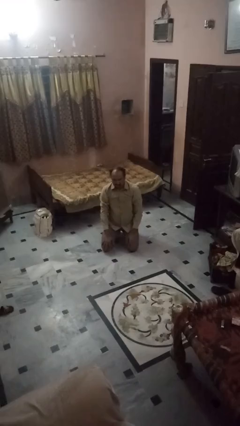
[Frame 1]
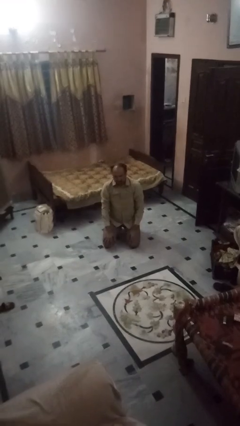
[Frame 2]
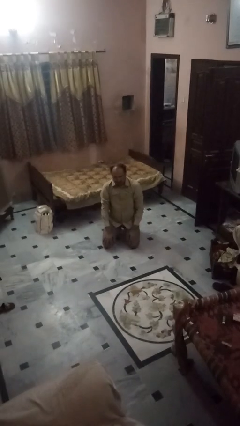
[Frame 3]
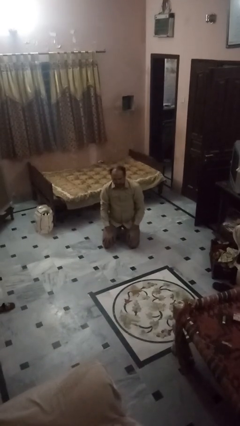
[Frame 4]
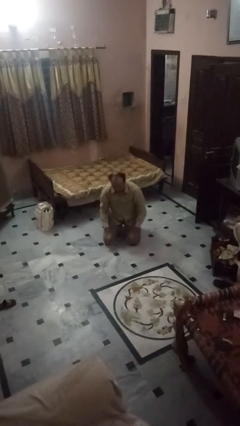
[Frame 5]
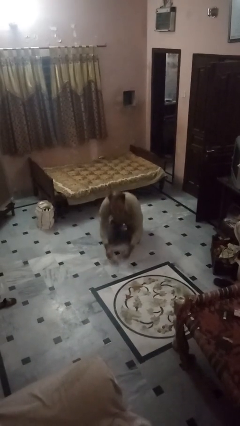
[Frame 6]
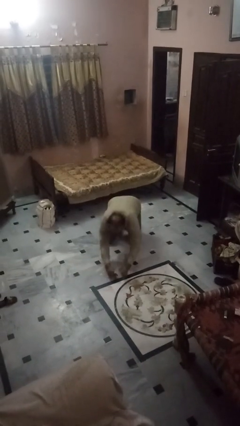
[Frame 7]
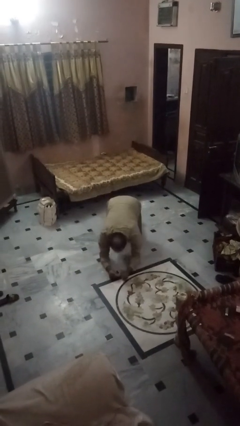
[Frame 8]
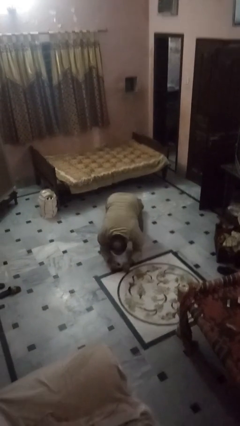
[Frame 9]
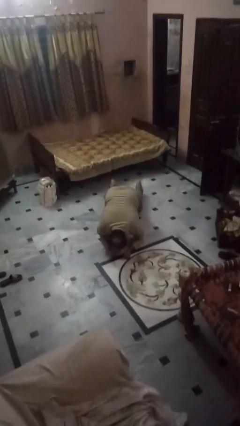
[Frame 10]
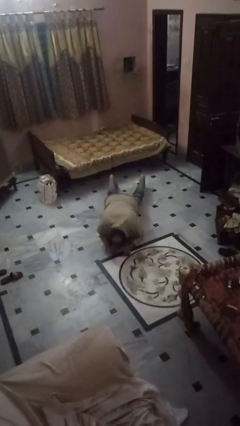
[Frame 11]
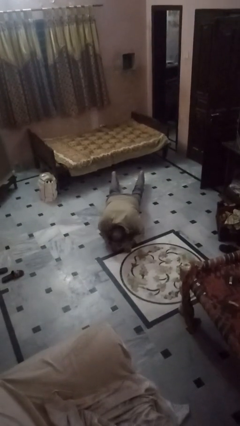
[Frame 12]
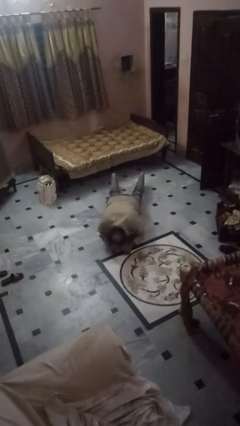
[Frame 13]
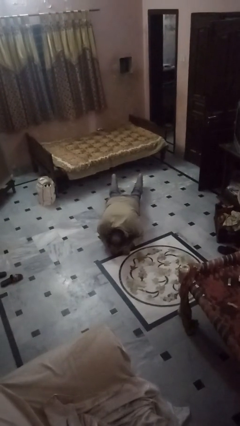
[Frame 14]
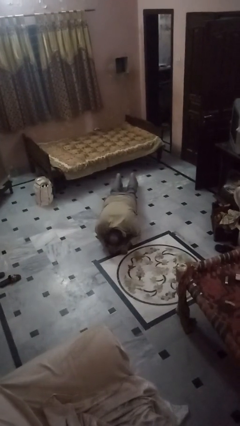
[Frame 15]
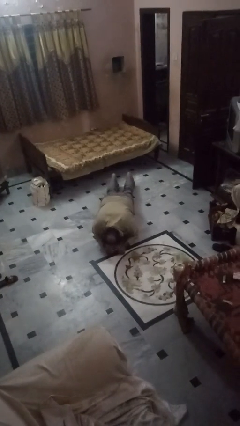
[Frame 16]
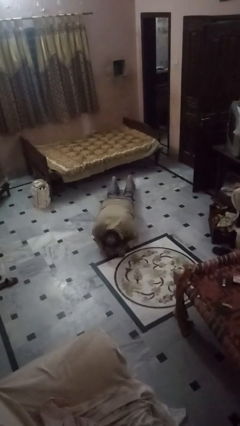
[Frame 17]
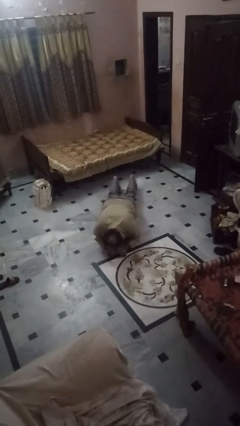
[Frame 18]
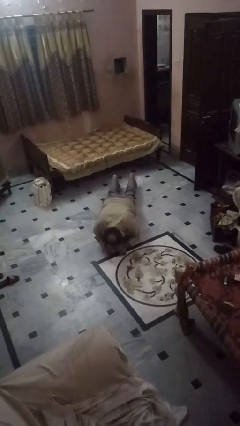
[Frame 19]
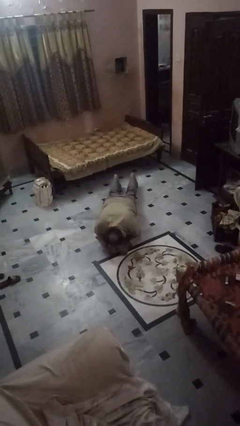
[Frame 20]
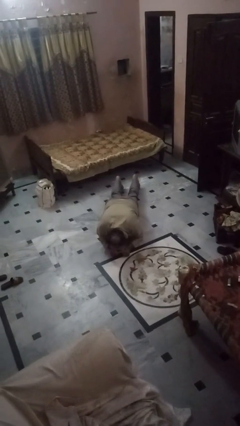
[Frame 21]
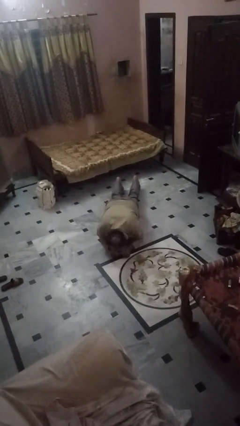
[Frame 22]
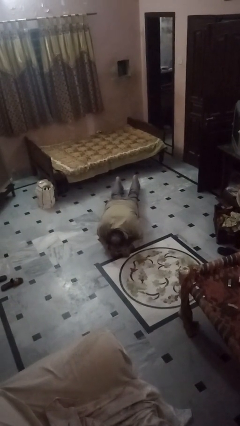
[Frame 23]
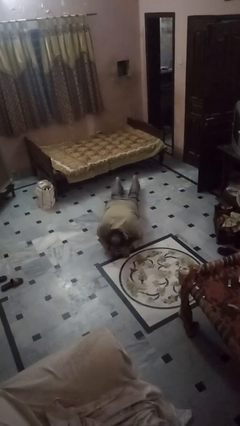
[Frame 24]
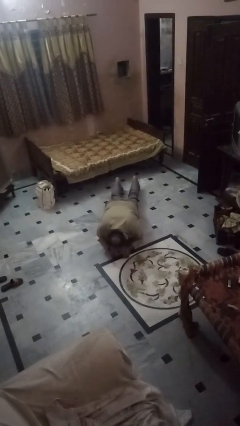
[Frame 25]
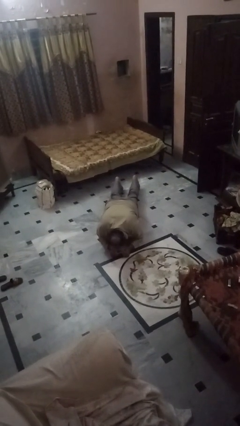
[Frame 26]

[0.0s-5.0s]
person exercises with plank

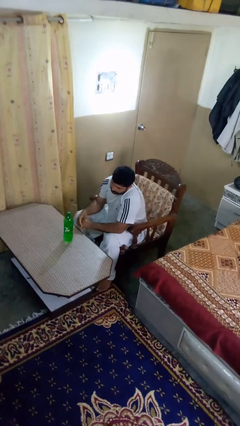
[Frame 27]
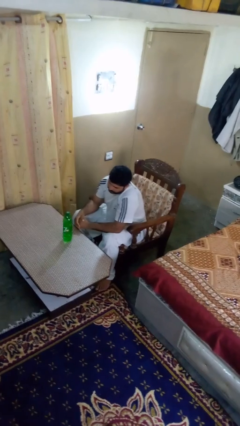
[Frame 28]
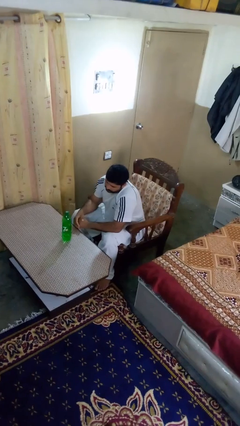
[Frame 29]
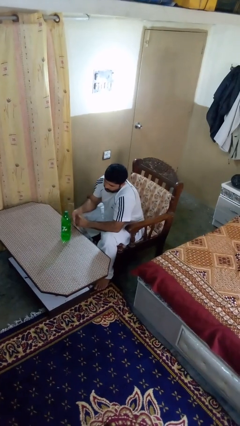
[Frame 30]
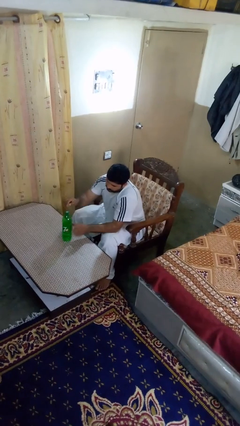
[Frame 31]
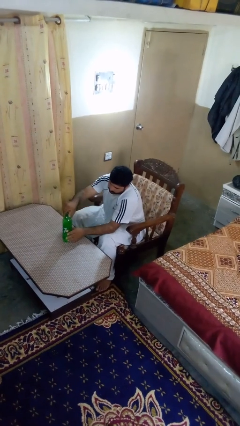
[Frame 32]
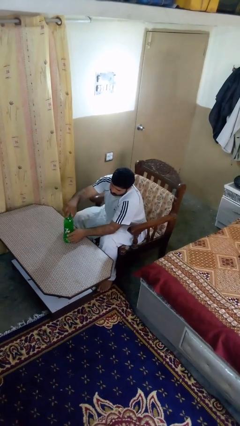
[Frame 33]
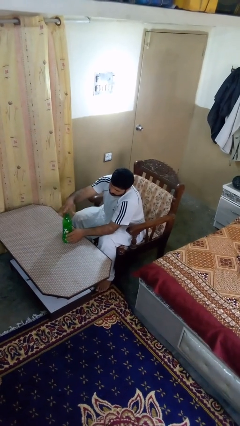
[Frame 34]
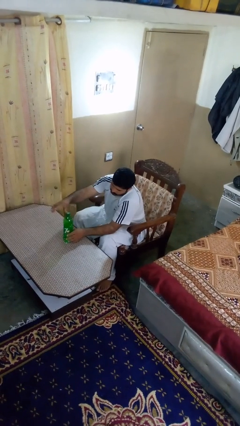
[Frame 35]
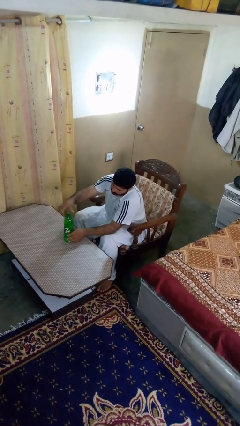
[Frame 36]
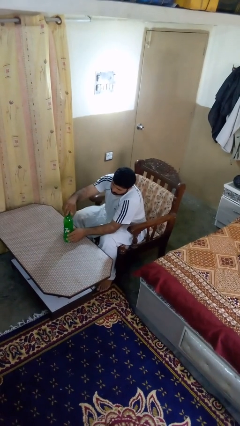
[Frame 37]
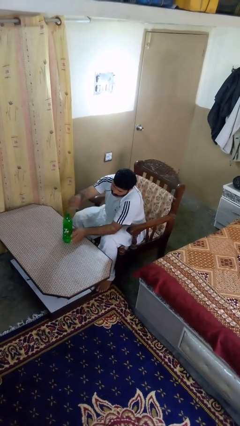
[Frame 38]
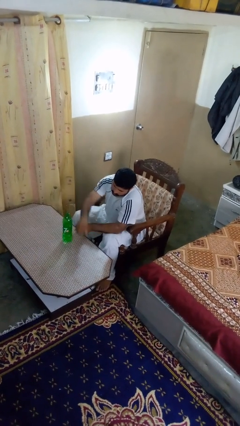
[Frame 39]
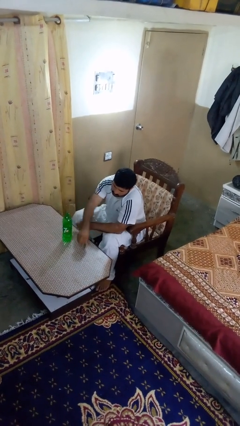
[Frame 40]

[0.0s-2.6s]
person unscrews lid from bottle

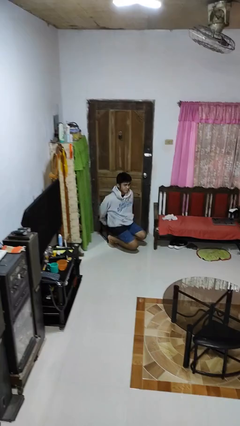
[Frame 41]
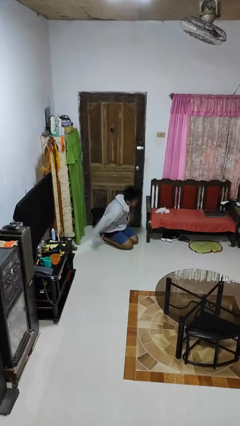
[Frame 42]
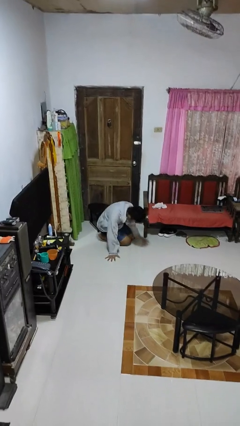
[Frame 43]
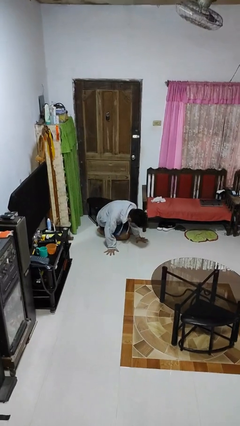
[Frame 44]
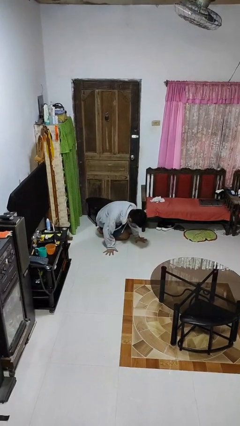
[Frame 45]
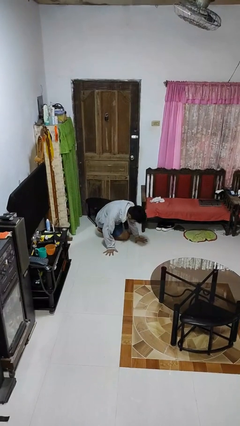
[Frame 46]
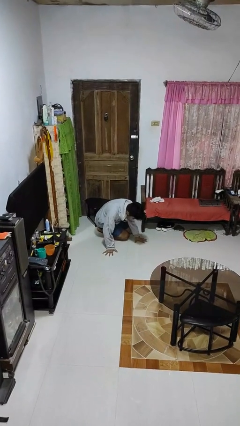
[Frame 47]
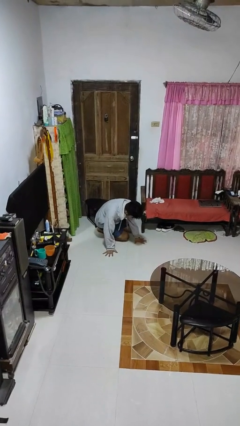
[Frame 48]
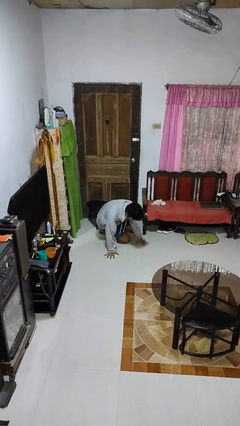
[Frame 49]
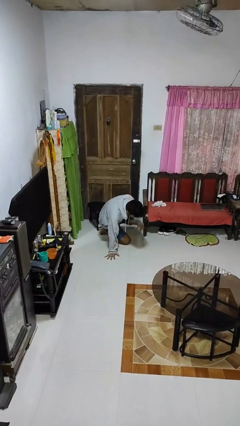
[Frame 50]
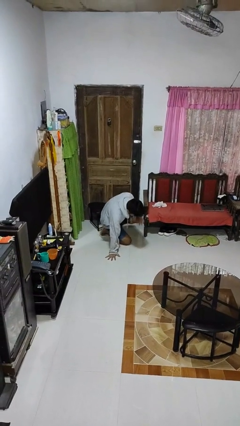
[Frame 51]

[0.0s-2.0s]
person falls from chair

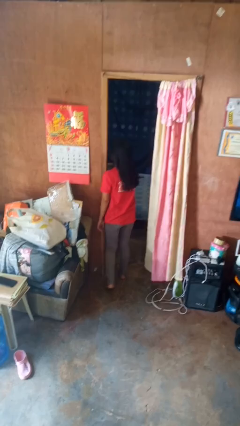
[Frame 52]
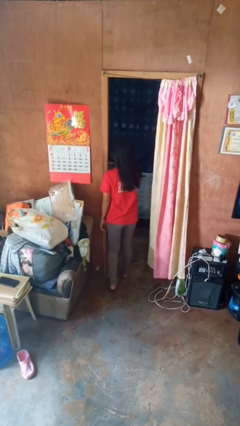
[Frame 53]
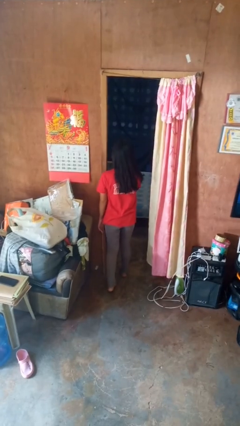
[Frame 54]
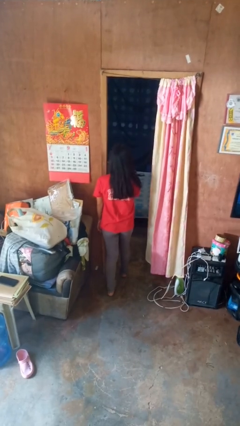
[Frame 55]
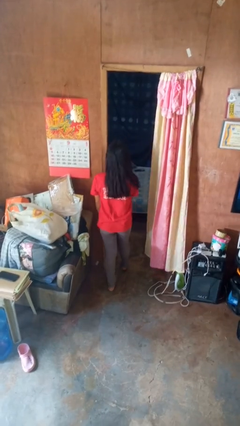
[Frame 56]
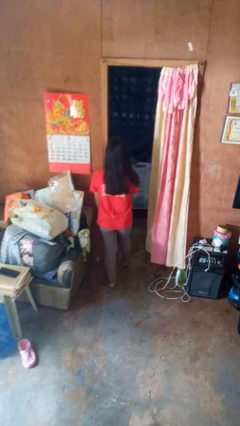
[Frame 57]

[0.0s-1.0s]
person bumps into wall

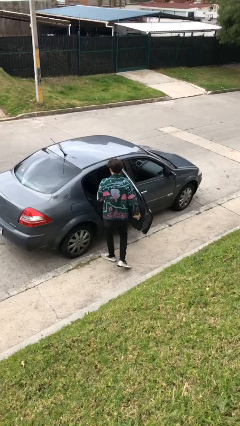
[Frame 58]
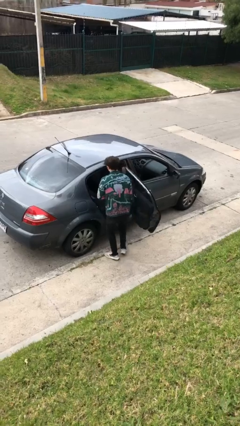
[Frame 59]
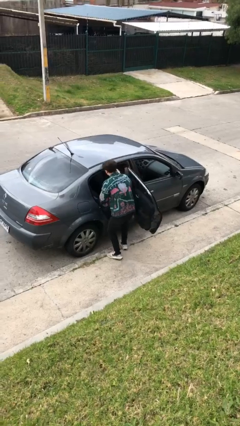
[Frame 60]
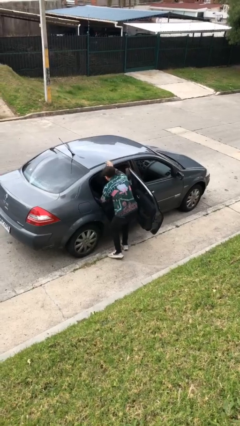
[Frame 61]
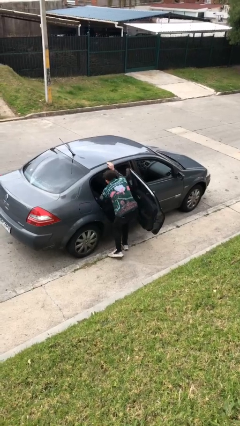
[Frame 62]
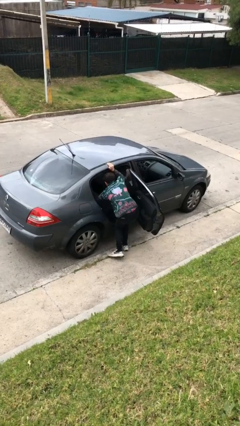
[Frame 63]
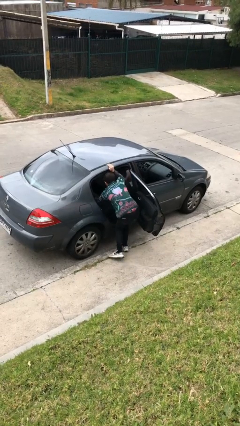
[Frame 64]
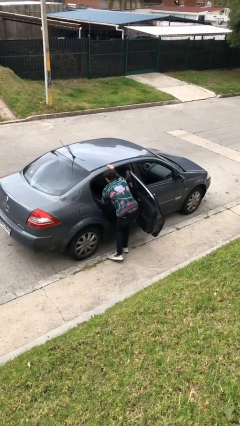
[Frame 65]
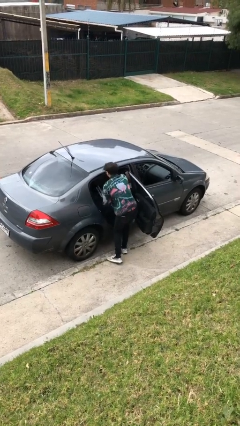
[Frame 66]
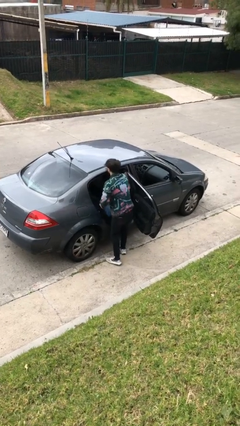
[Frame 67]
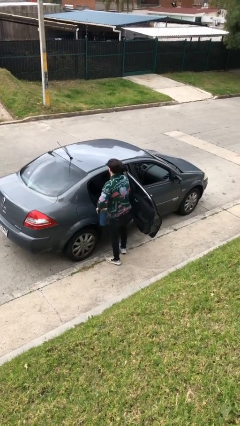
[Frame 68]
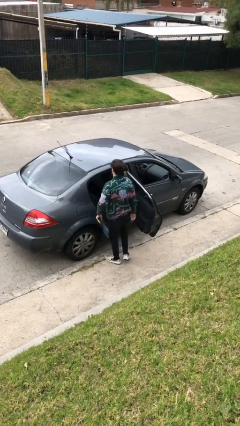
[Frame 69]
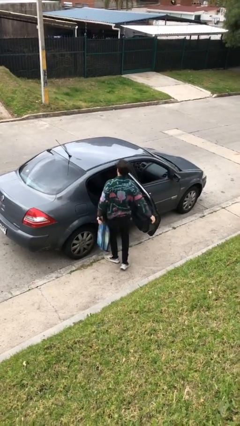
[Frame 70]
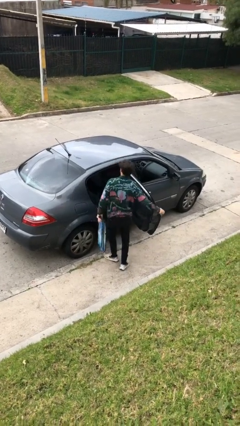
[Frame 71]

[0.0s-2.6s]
person unloads car

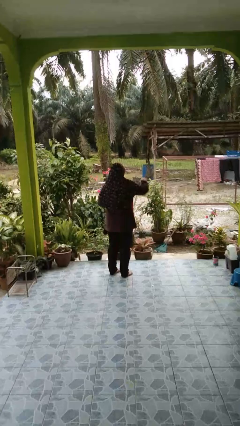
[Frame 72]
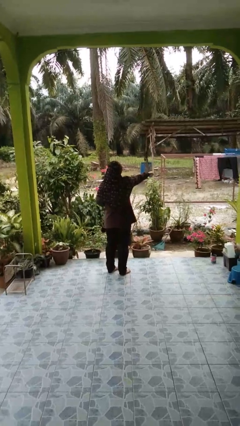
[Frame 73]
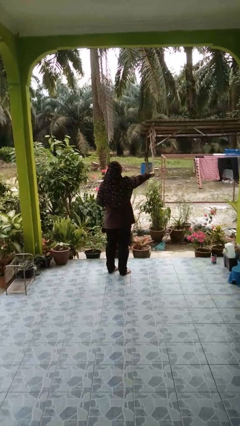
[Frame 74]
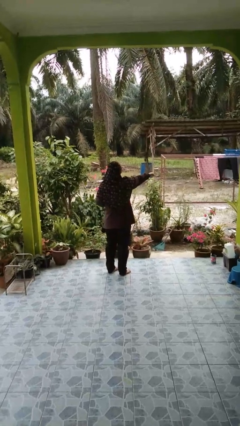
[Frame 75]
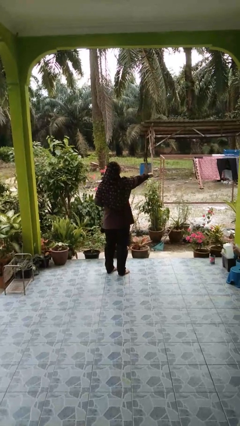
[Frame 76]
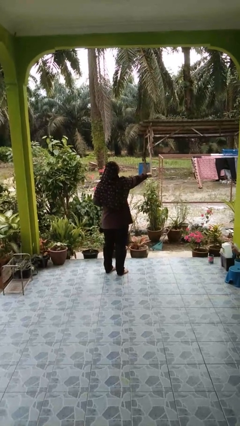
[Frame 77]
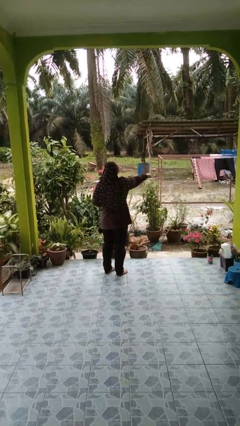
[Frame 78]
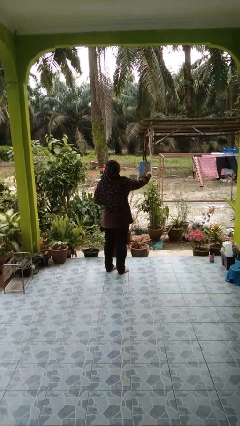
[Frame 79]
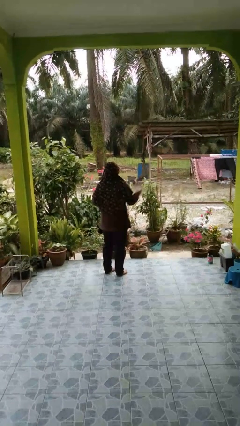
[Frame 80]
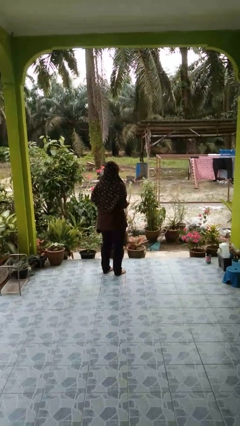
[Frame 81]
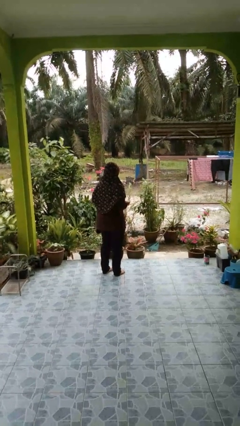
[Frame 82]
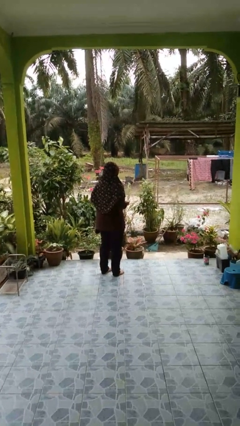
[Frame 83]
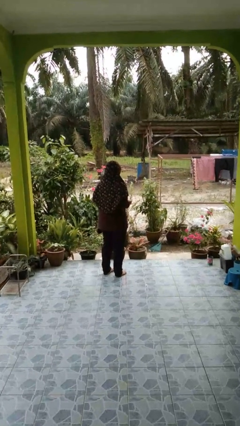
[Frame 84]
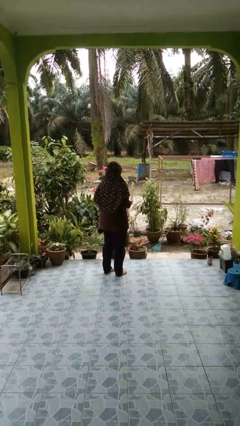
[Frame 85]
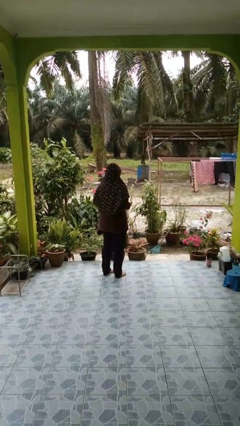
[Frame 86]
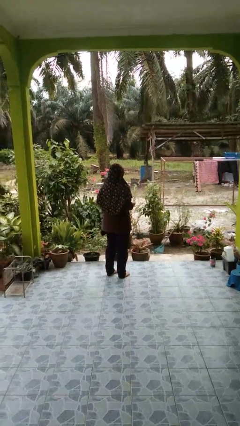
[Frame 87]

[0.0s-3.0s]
person punches

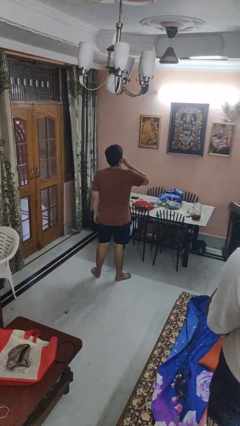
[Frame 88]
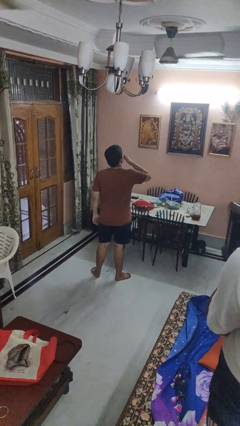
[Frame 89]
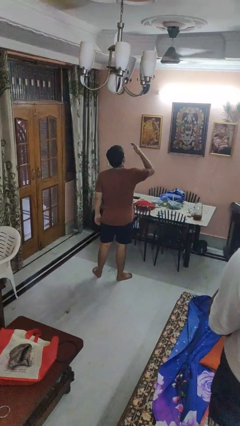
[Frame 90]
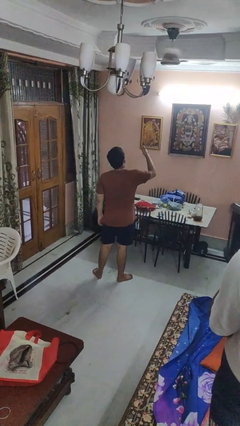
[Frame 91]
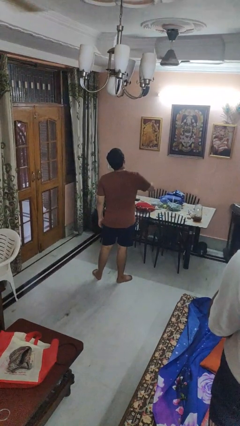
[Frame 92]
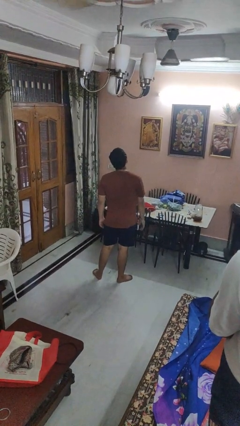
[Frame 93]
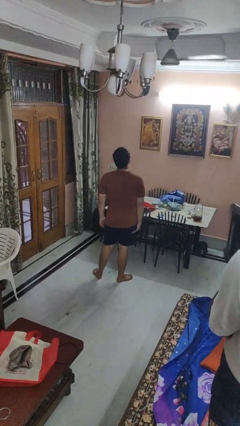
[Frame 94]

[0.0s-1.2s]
person gestures blow kiss
